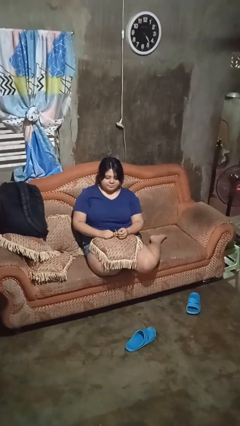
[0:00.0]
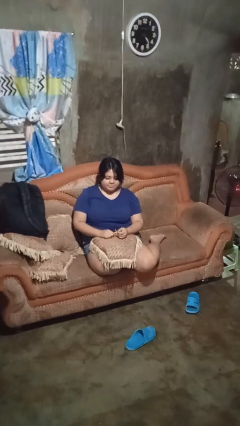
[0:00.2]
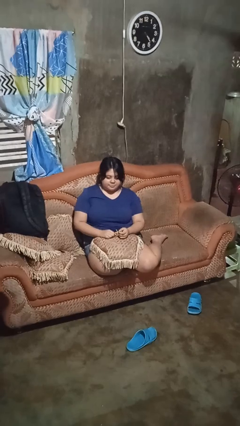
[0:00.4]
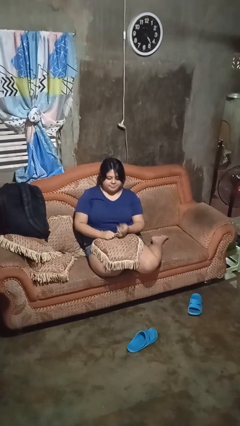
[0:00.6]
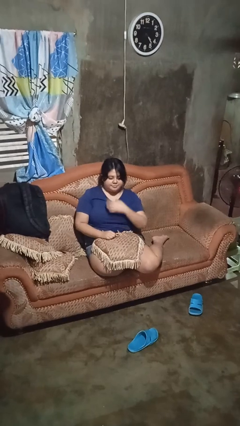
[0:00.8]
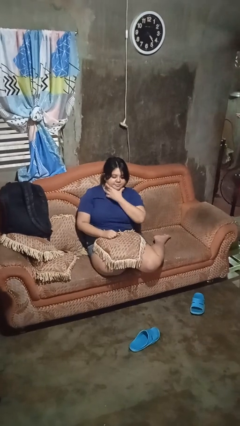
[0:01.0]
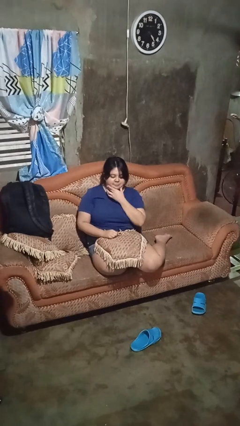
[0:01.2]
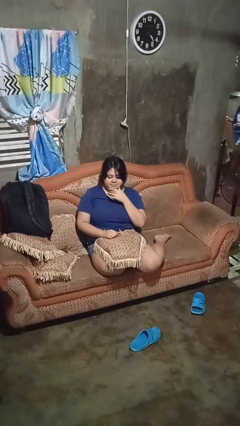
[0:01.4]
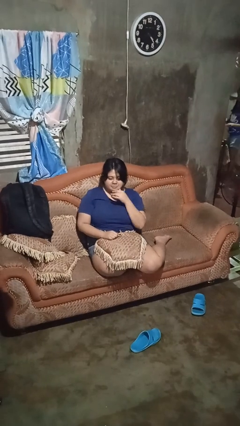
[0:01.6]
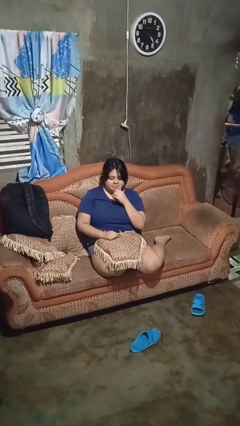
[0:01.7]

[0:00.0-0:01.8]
person strokes chin

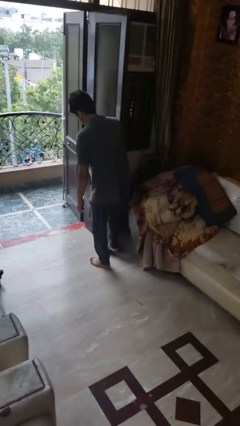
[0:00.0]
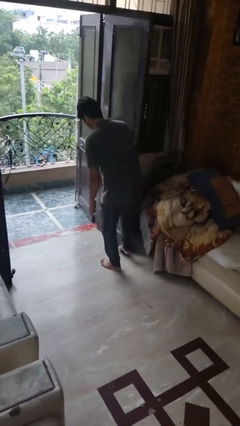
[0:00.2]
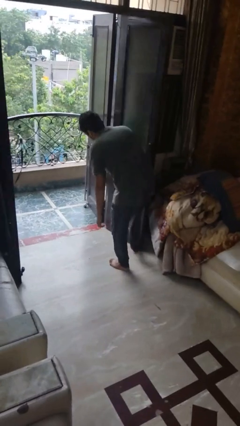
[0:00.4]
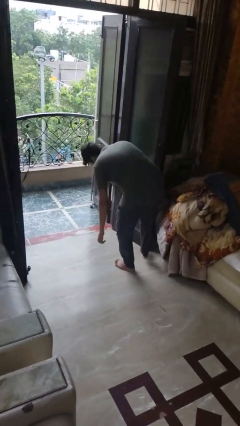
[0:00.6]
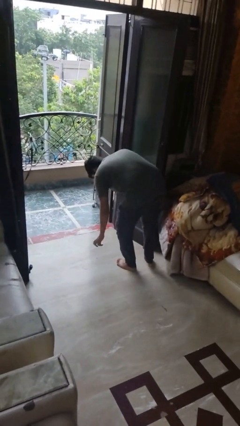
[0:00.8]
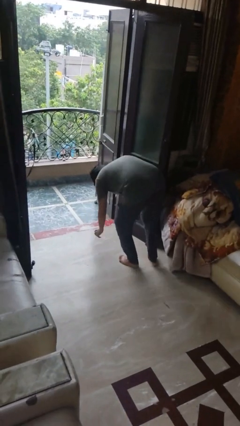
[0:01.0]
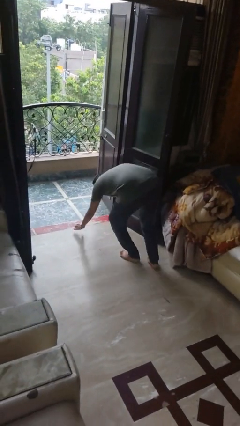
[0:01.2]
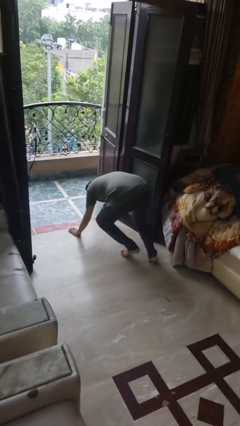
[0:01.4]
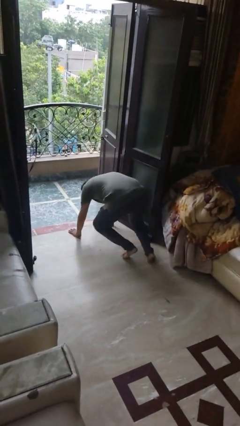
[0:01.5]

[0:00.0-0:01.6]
person trips on object on floor

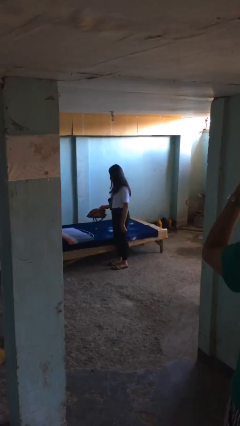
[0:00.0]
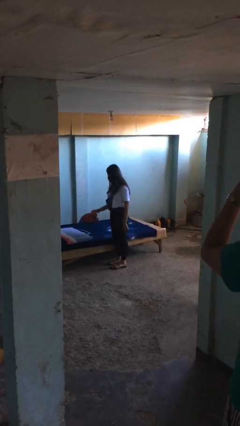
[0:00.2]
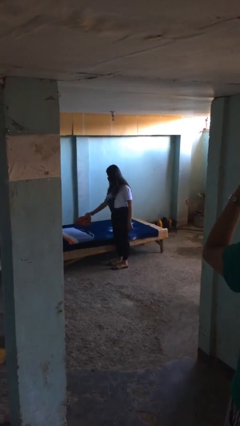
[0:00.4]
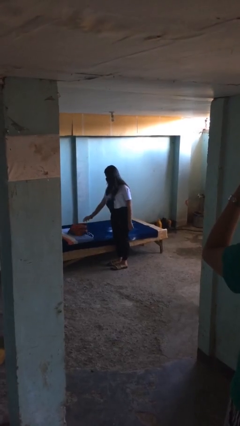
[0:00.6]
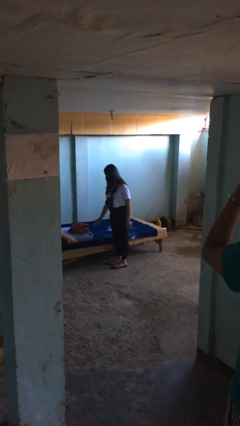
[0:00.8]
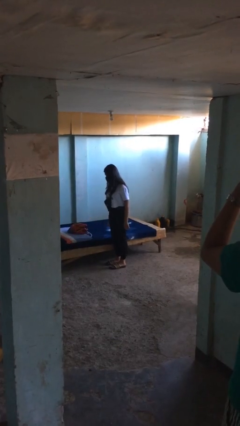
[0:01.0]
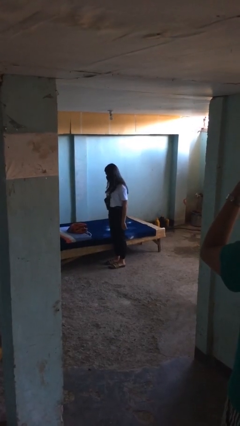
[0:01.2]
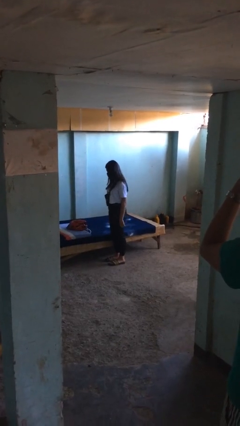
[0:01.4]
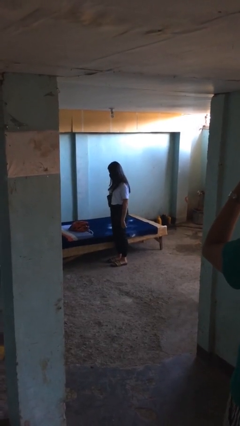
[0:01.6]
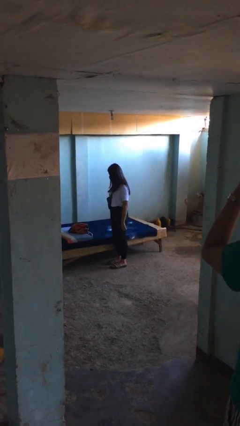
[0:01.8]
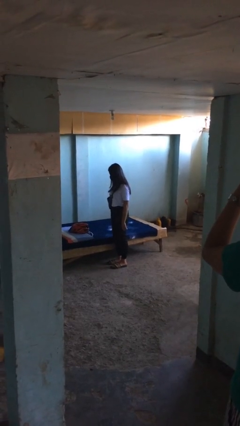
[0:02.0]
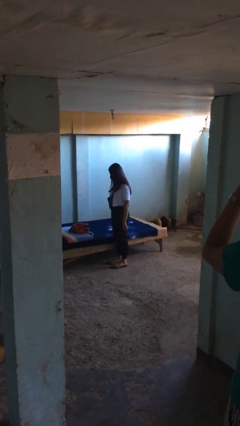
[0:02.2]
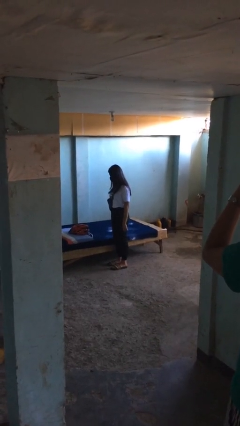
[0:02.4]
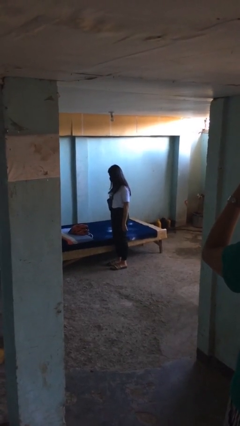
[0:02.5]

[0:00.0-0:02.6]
person puts down object on bed

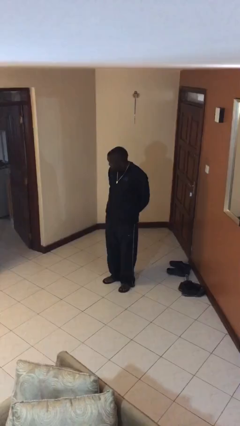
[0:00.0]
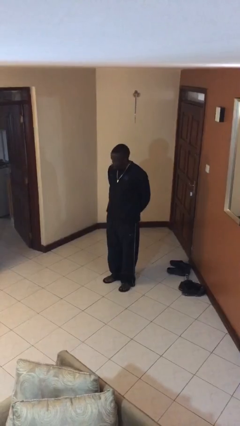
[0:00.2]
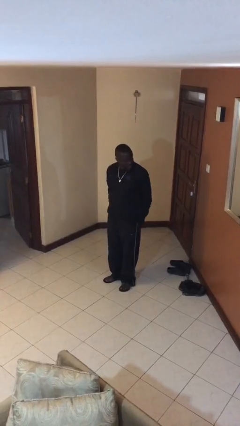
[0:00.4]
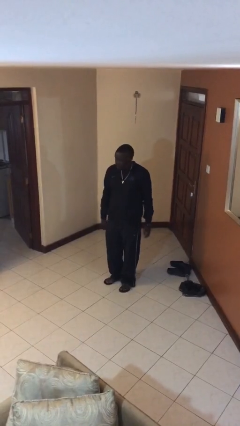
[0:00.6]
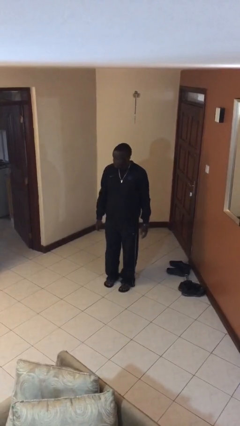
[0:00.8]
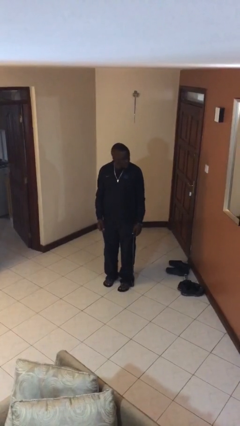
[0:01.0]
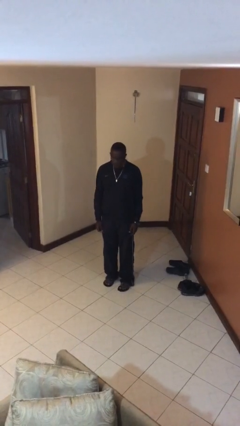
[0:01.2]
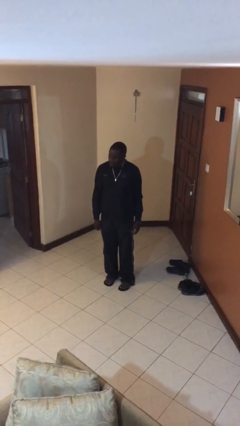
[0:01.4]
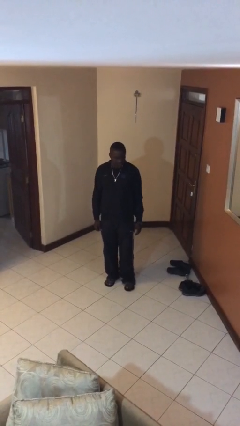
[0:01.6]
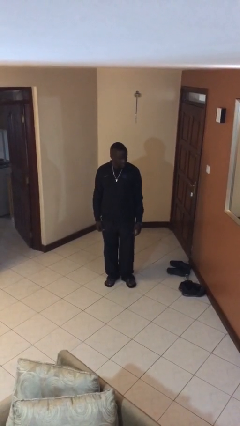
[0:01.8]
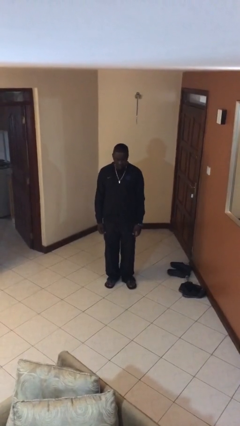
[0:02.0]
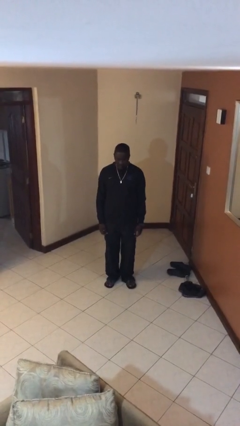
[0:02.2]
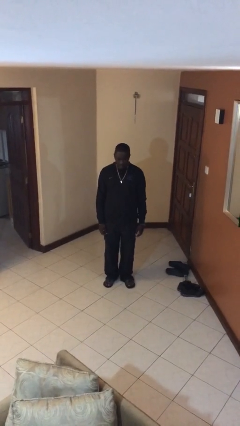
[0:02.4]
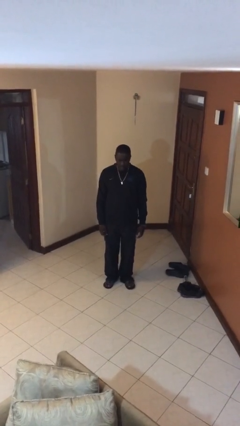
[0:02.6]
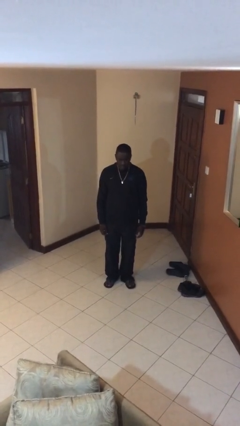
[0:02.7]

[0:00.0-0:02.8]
person shakes head

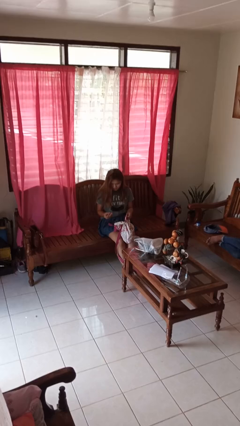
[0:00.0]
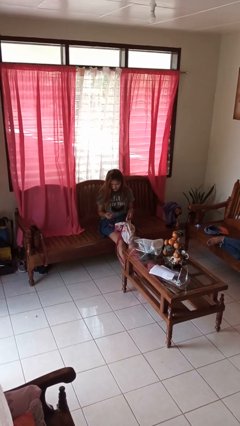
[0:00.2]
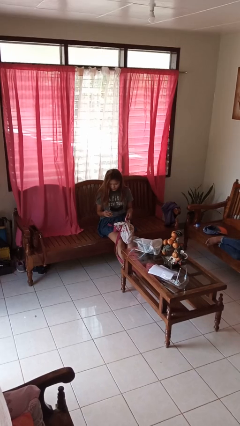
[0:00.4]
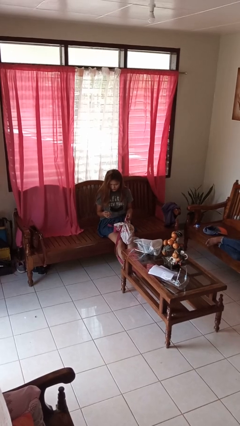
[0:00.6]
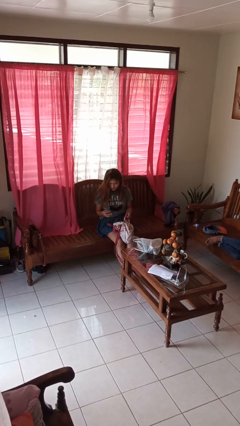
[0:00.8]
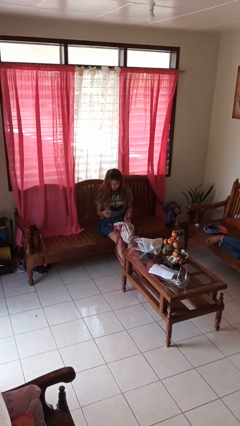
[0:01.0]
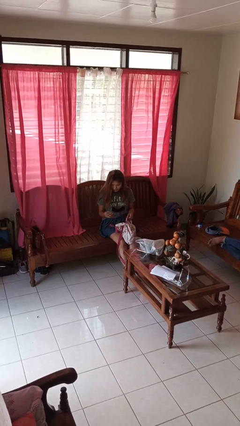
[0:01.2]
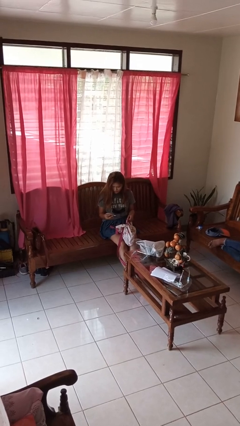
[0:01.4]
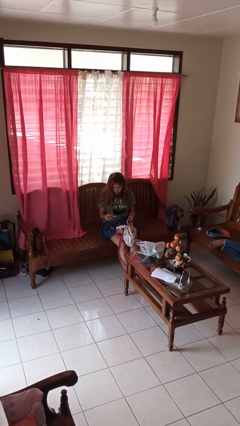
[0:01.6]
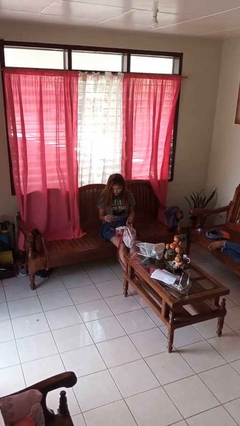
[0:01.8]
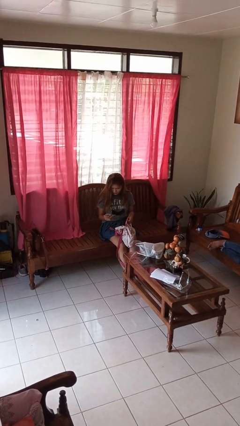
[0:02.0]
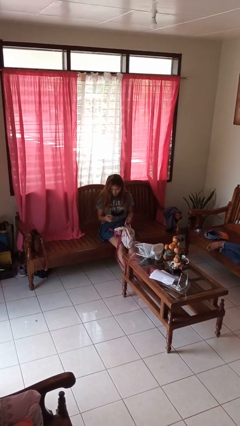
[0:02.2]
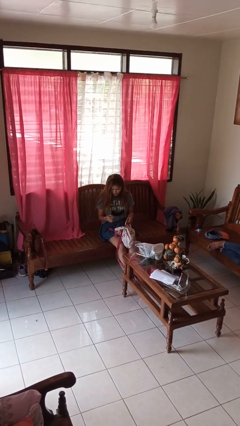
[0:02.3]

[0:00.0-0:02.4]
person takes object from backpack

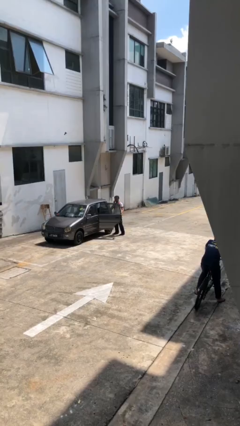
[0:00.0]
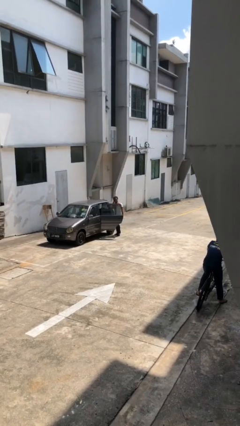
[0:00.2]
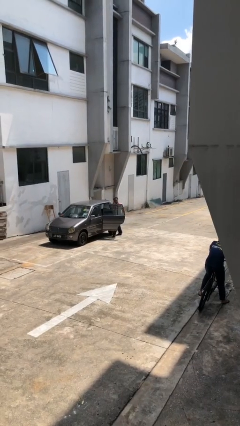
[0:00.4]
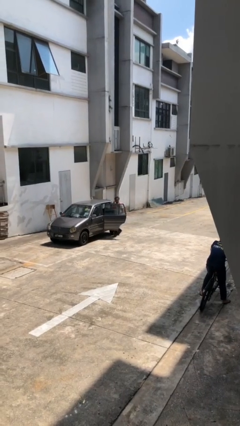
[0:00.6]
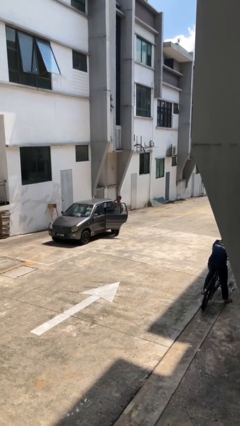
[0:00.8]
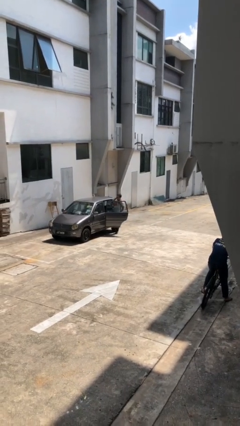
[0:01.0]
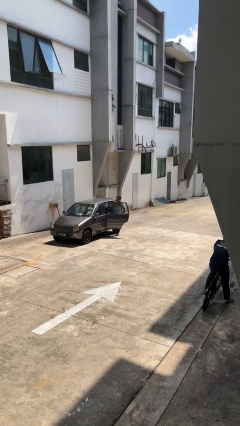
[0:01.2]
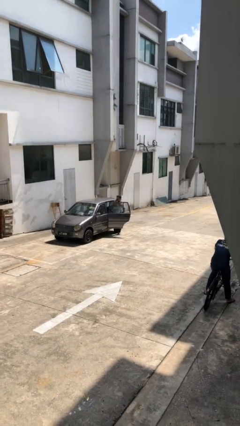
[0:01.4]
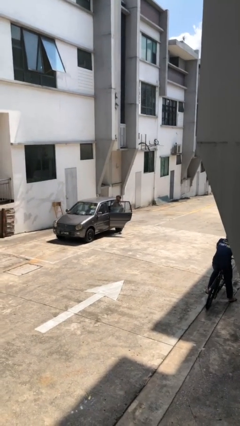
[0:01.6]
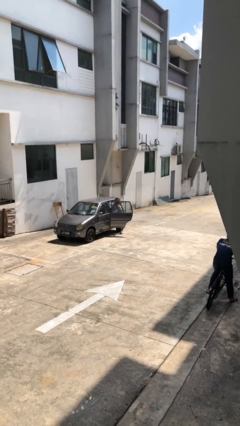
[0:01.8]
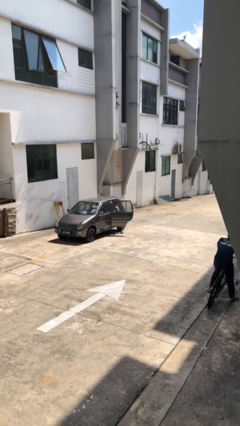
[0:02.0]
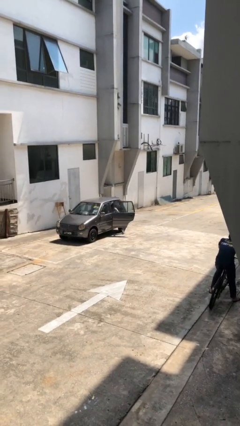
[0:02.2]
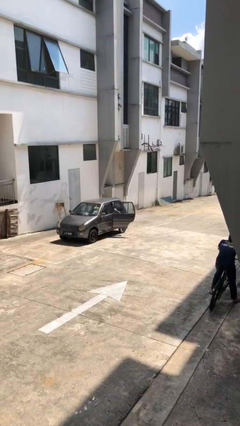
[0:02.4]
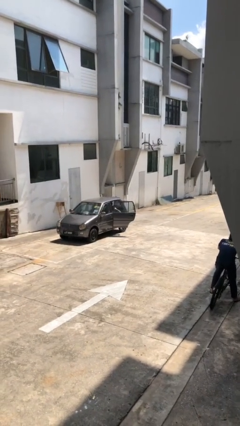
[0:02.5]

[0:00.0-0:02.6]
person enters car

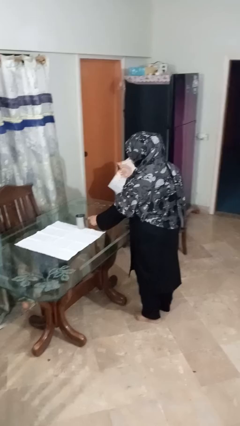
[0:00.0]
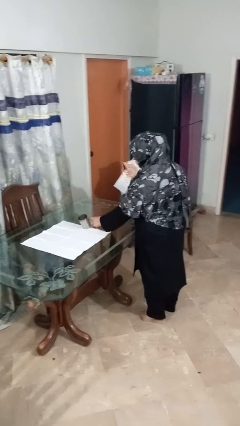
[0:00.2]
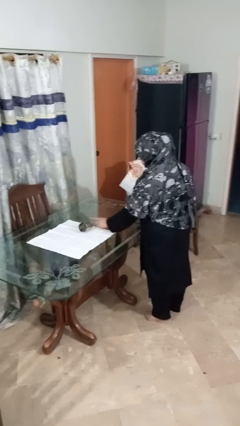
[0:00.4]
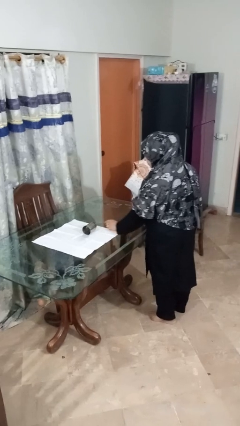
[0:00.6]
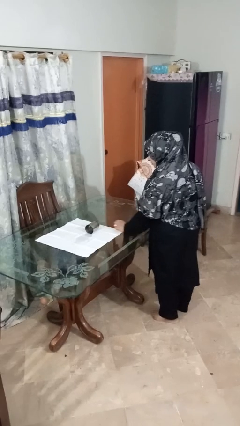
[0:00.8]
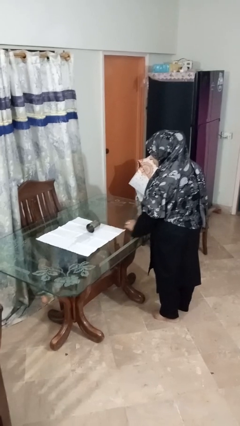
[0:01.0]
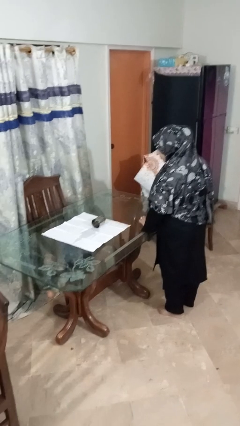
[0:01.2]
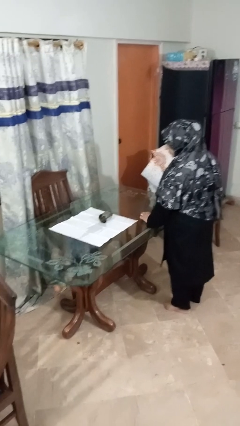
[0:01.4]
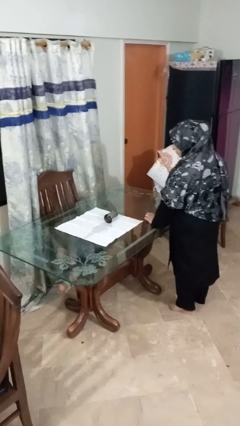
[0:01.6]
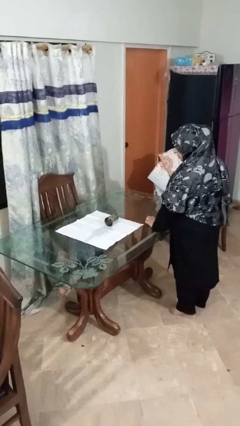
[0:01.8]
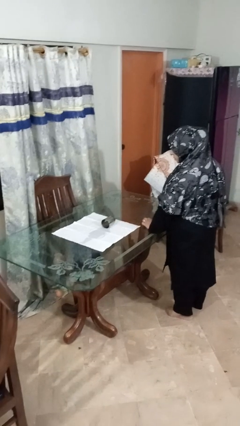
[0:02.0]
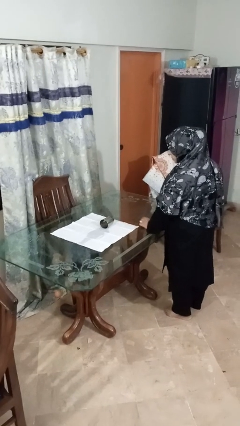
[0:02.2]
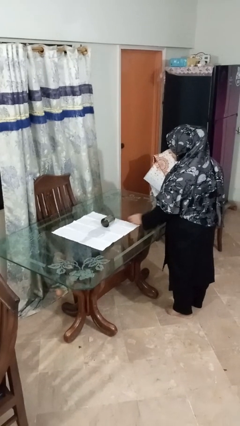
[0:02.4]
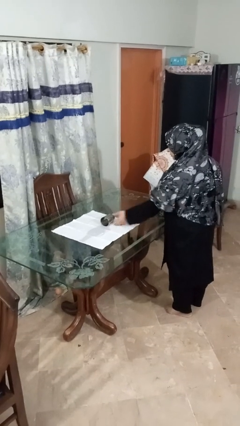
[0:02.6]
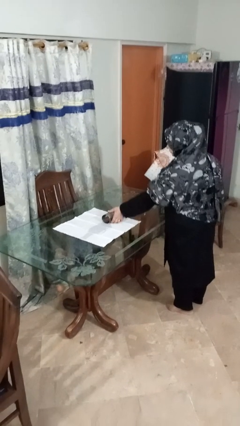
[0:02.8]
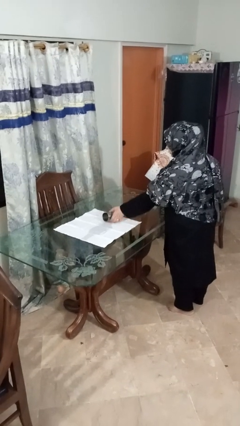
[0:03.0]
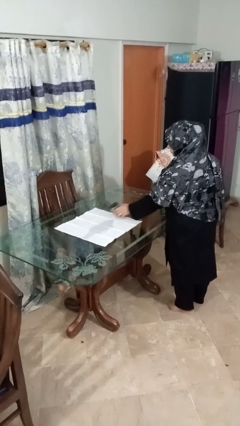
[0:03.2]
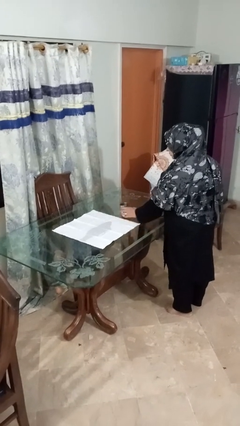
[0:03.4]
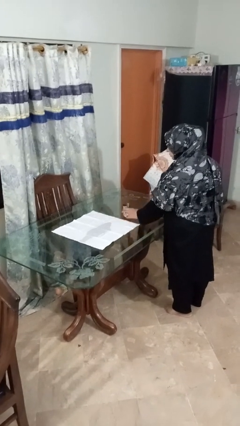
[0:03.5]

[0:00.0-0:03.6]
person spills on table
